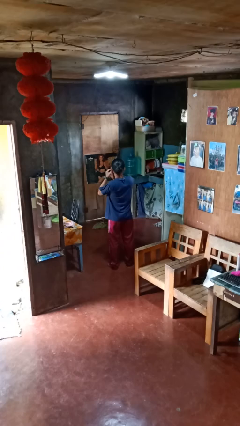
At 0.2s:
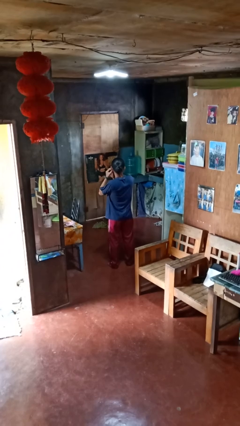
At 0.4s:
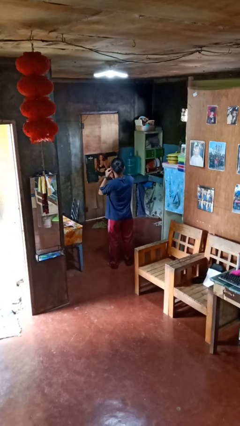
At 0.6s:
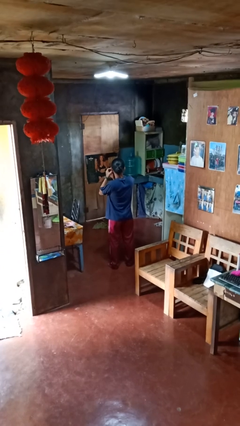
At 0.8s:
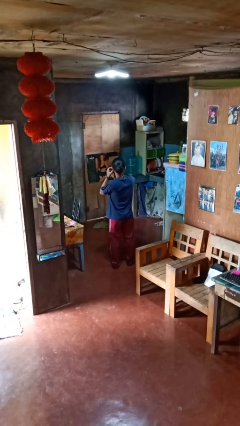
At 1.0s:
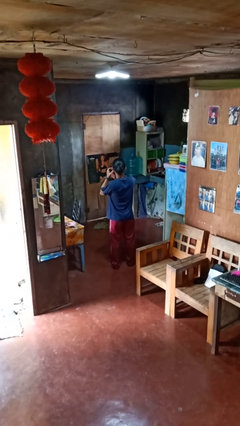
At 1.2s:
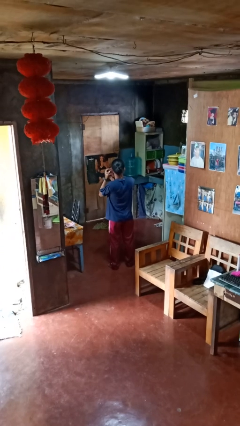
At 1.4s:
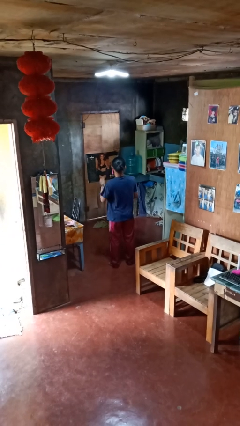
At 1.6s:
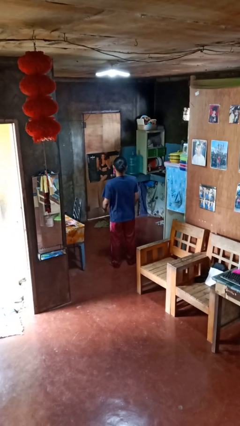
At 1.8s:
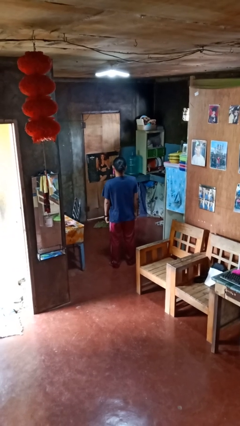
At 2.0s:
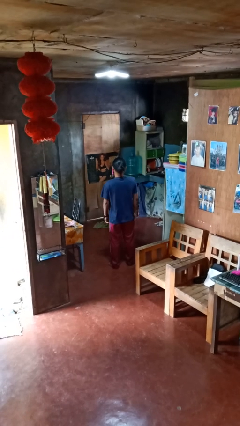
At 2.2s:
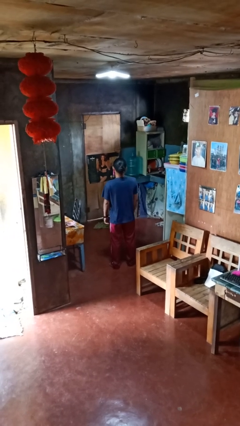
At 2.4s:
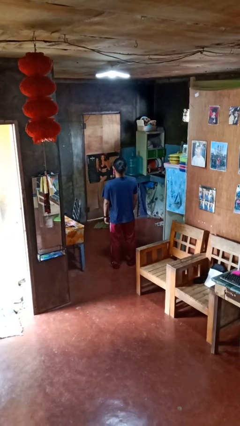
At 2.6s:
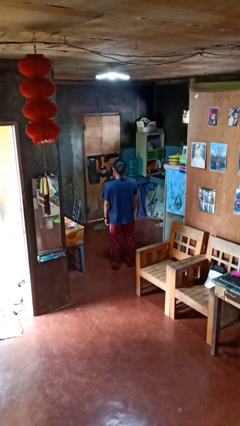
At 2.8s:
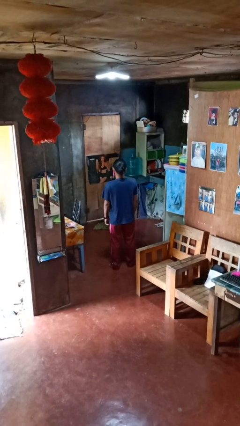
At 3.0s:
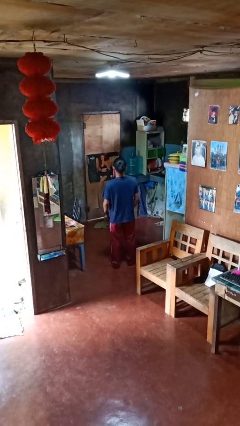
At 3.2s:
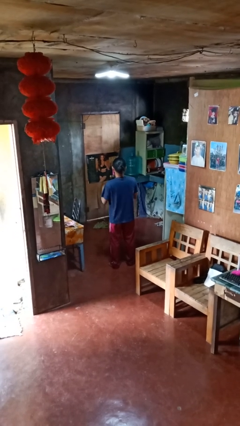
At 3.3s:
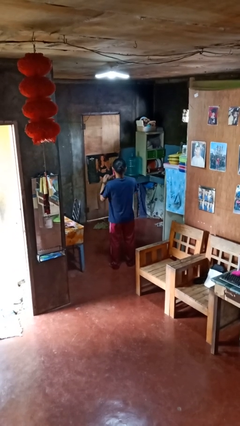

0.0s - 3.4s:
person puts on earrings

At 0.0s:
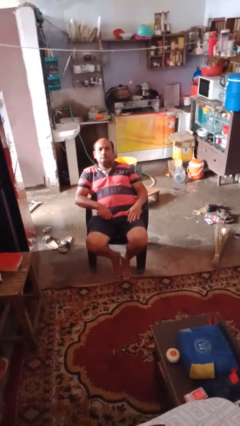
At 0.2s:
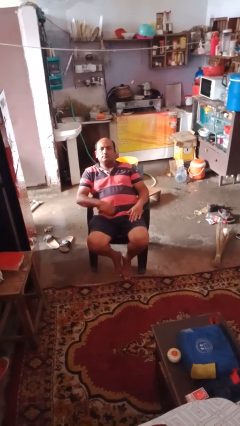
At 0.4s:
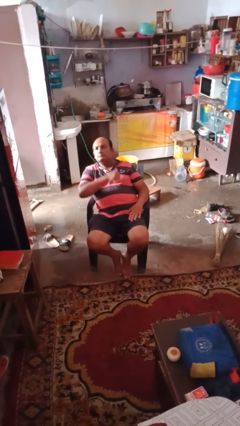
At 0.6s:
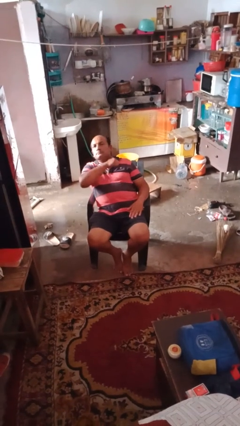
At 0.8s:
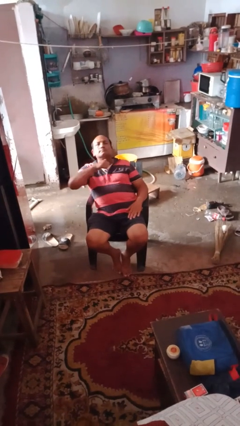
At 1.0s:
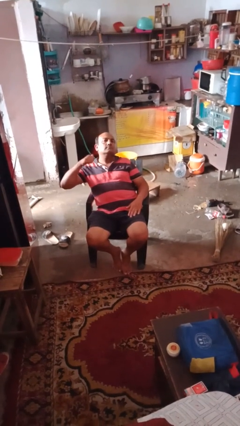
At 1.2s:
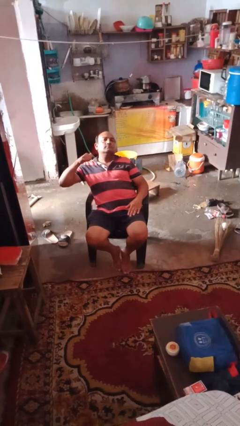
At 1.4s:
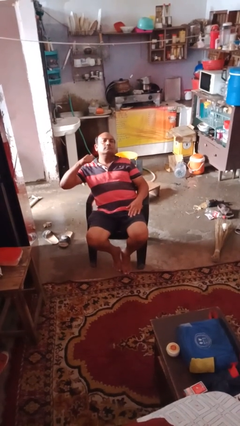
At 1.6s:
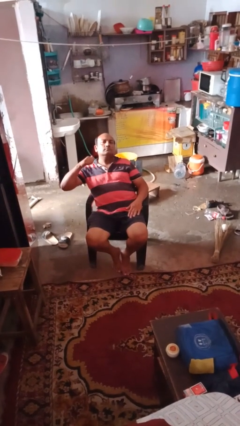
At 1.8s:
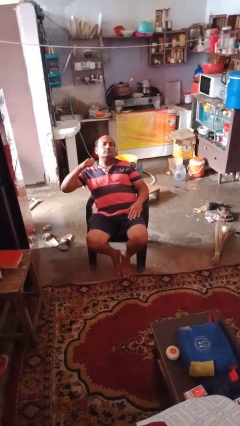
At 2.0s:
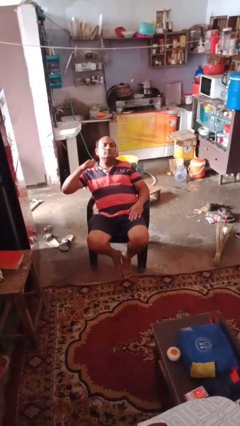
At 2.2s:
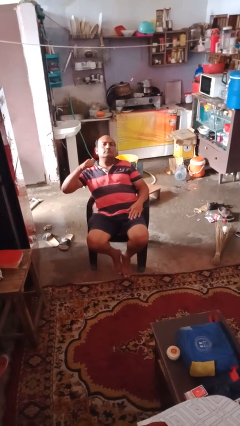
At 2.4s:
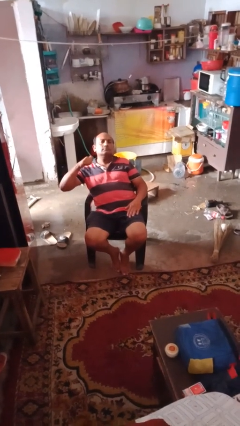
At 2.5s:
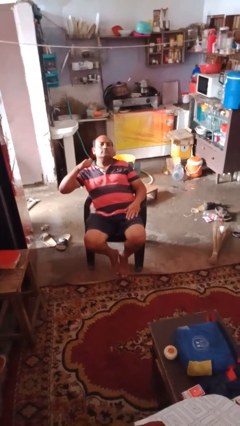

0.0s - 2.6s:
person gestures cut

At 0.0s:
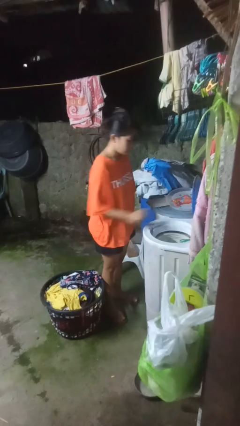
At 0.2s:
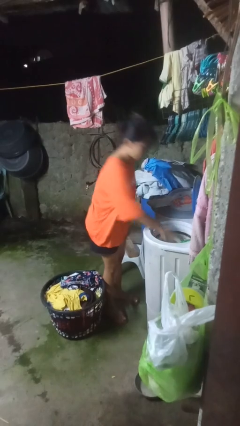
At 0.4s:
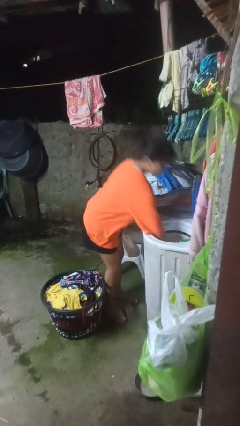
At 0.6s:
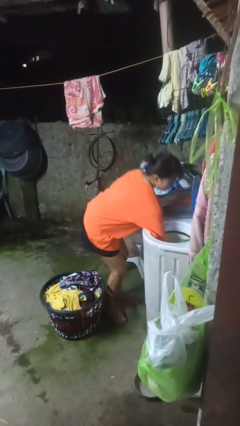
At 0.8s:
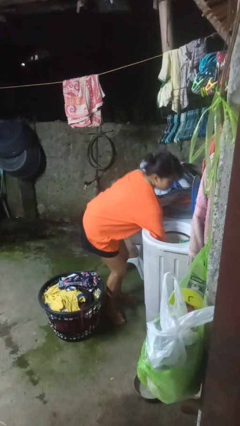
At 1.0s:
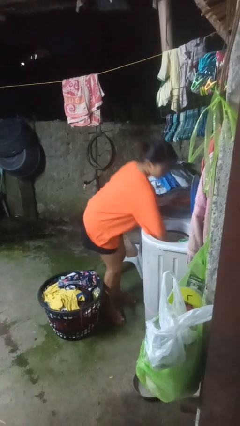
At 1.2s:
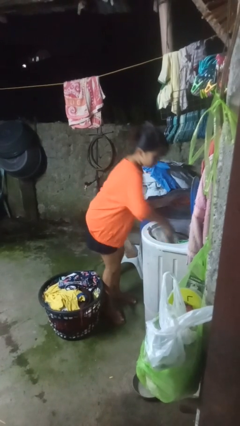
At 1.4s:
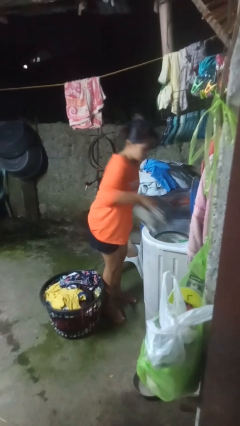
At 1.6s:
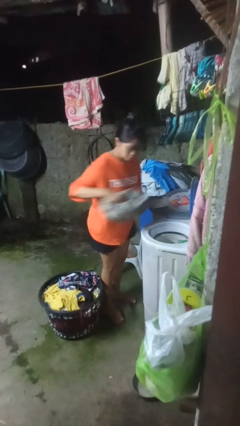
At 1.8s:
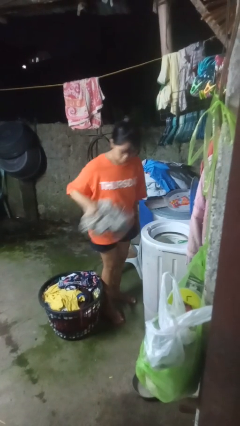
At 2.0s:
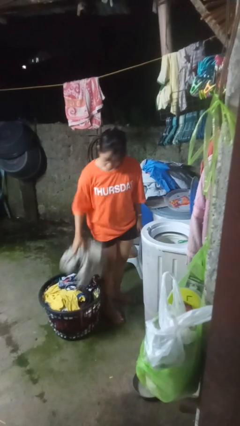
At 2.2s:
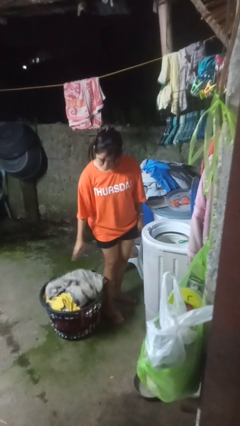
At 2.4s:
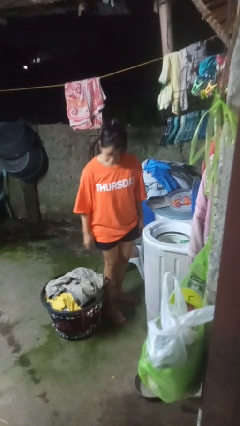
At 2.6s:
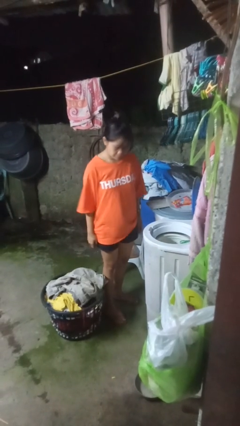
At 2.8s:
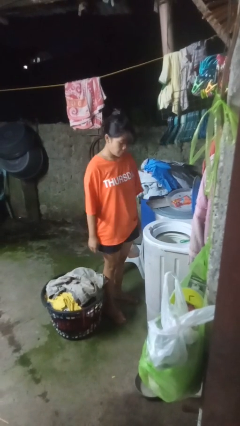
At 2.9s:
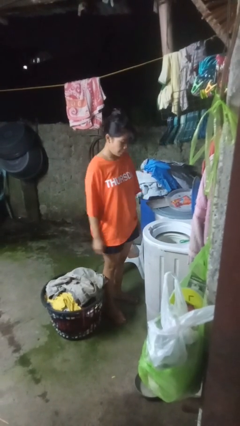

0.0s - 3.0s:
person unloads dryer

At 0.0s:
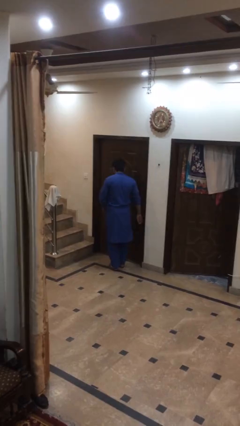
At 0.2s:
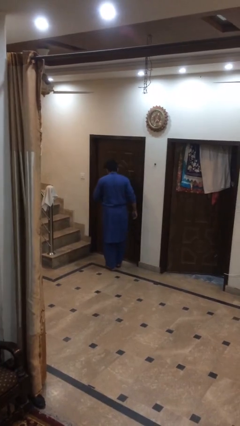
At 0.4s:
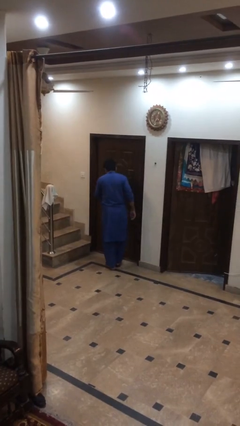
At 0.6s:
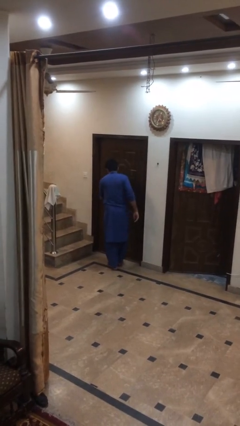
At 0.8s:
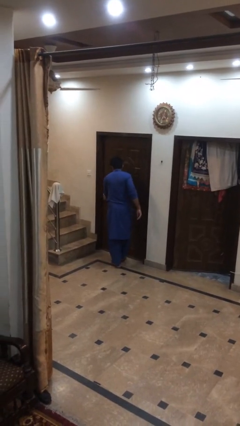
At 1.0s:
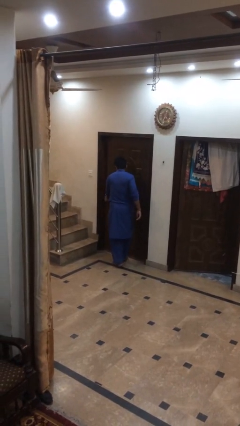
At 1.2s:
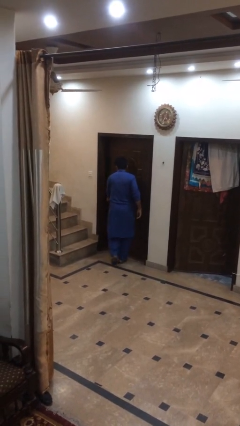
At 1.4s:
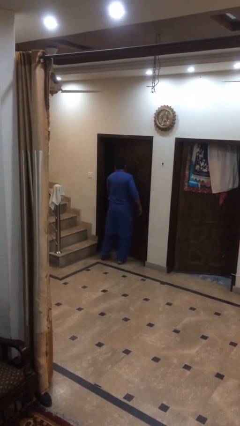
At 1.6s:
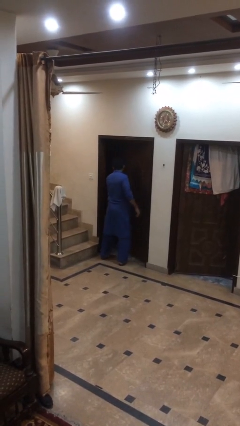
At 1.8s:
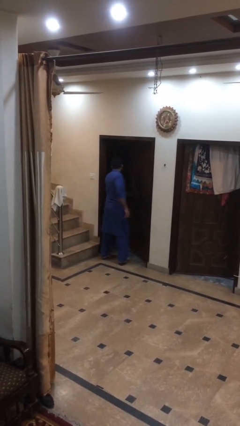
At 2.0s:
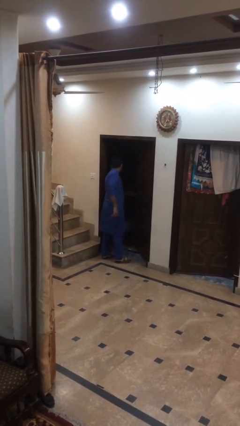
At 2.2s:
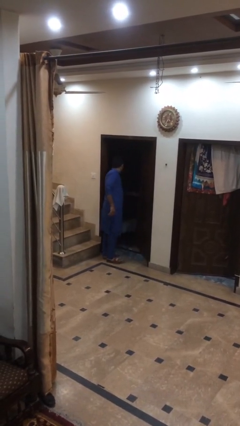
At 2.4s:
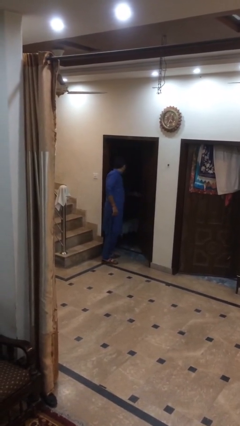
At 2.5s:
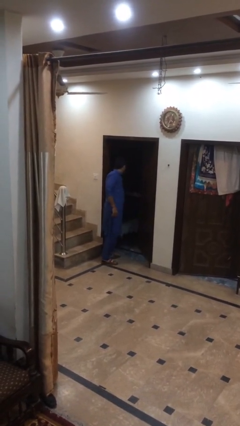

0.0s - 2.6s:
person opens facility door

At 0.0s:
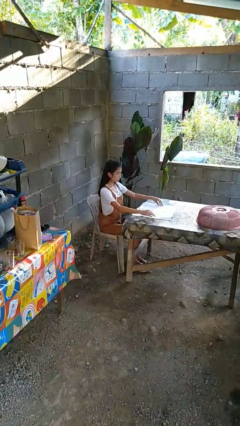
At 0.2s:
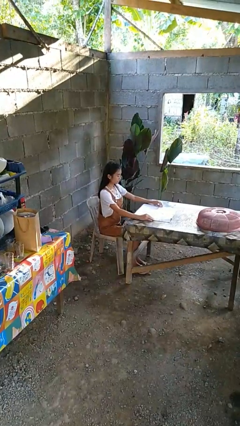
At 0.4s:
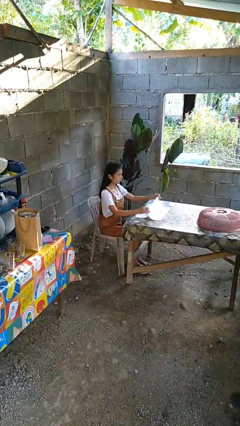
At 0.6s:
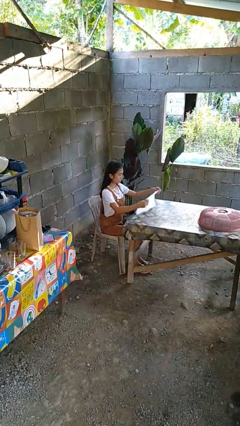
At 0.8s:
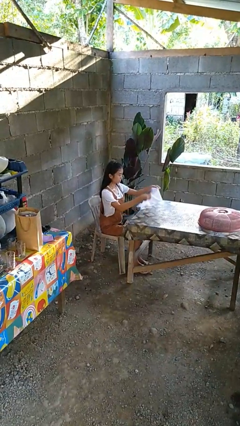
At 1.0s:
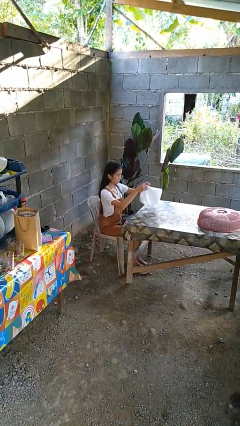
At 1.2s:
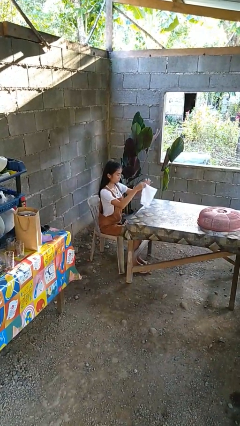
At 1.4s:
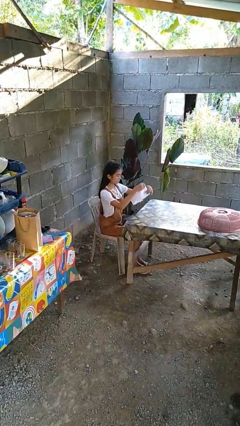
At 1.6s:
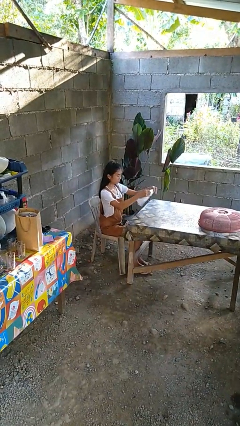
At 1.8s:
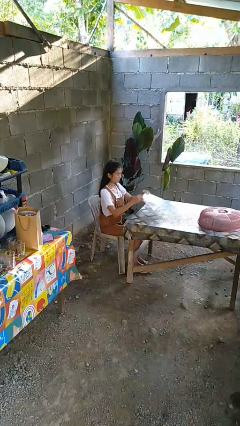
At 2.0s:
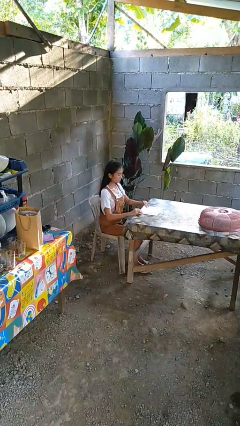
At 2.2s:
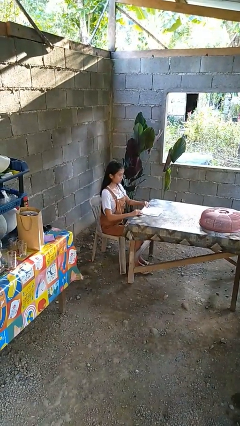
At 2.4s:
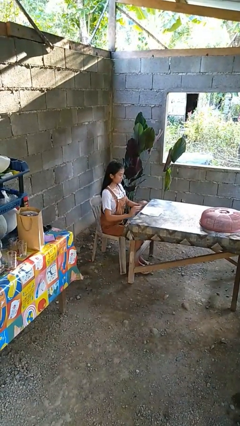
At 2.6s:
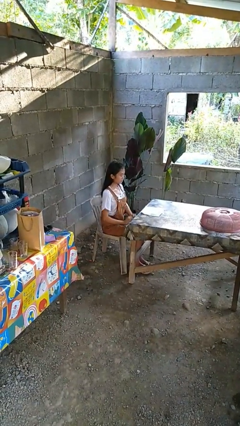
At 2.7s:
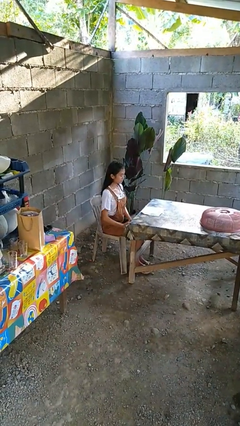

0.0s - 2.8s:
person folds tablecloth

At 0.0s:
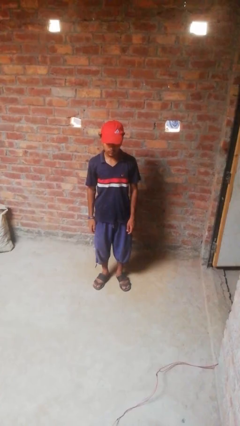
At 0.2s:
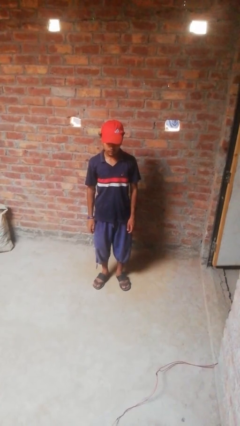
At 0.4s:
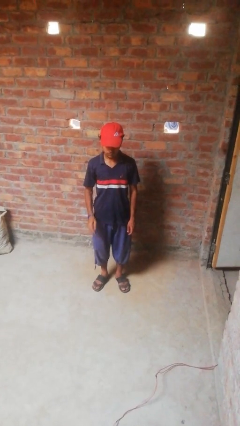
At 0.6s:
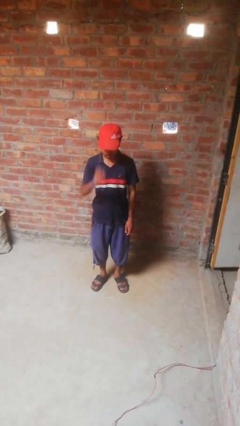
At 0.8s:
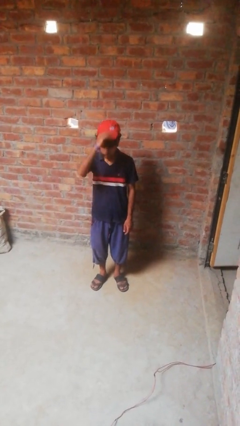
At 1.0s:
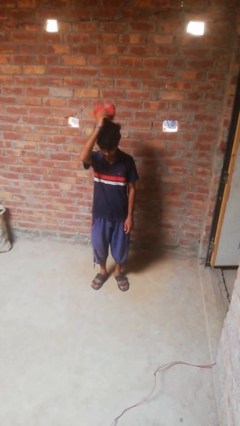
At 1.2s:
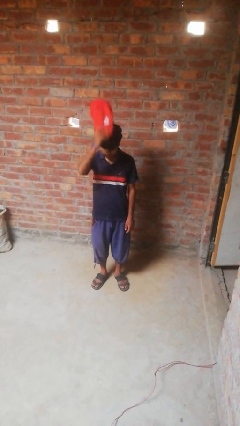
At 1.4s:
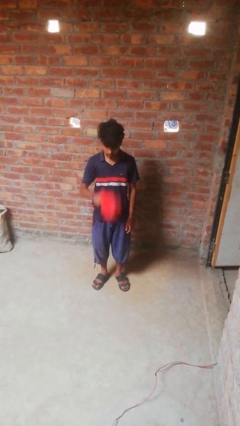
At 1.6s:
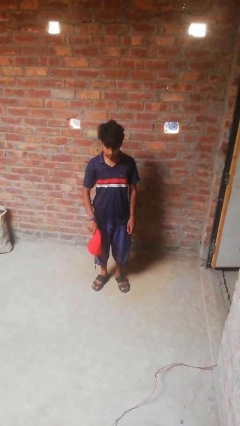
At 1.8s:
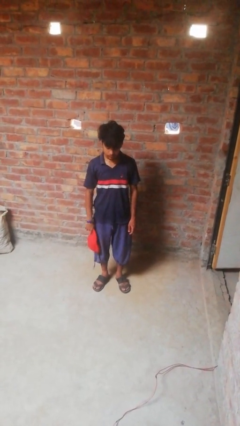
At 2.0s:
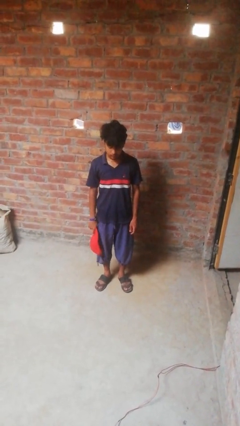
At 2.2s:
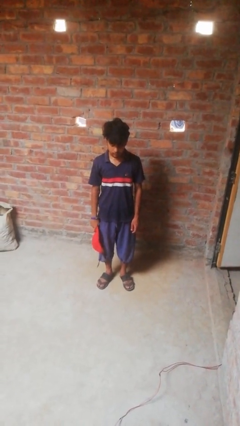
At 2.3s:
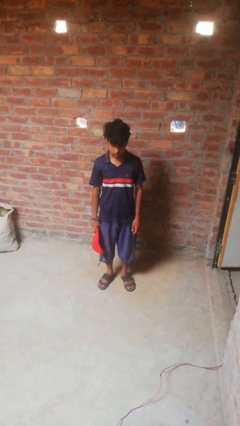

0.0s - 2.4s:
person takes off hat

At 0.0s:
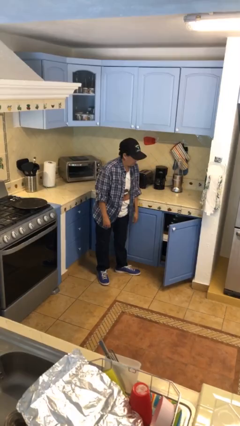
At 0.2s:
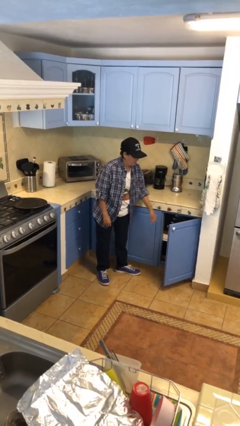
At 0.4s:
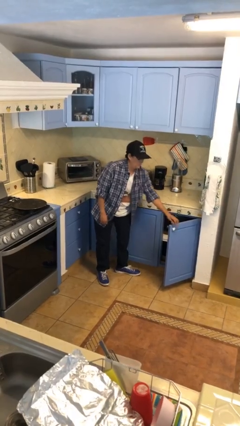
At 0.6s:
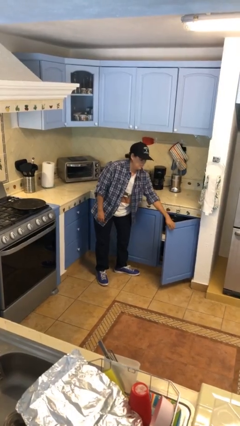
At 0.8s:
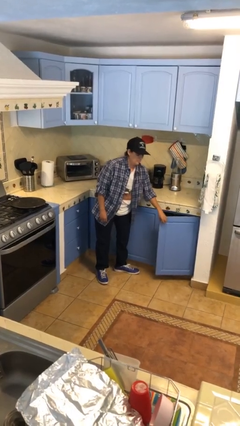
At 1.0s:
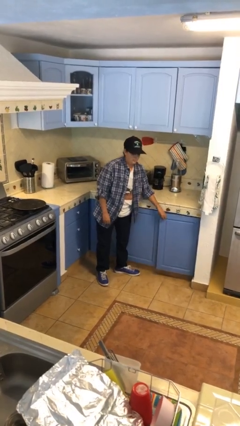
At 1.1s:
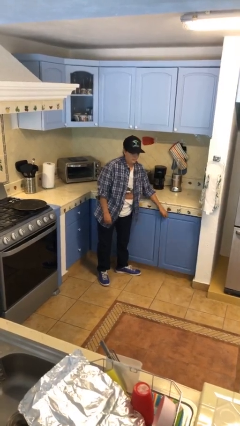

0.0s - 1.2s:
person closes cabinet
